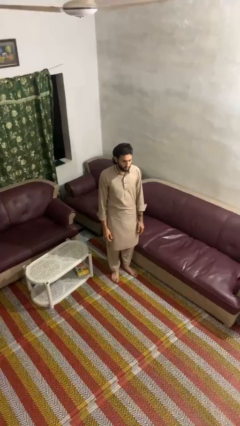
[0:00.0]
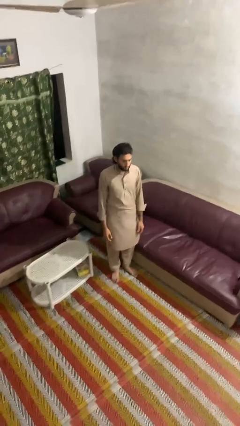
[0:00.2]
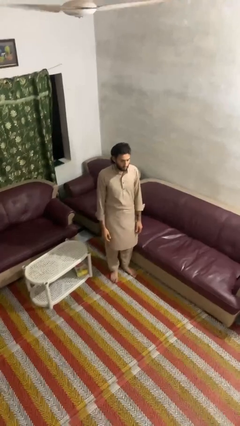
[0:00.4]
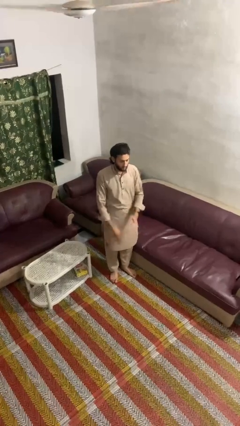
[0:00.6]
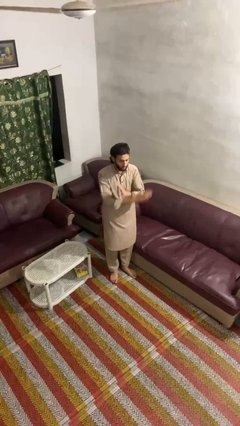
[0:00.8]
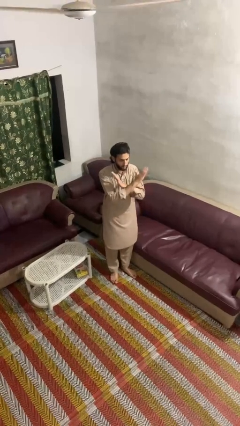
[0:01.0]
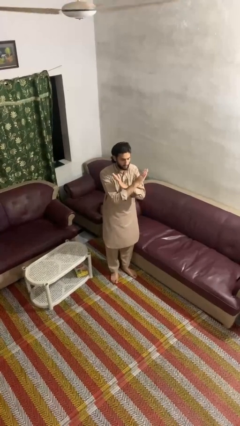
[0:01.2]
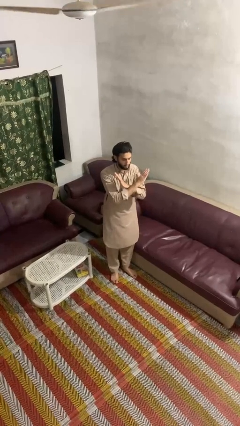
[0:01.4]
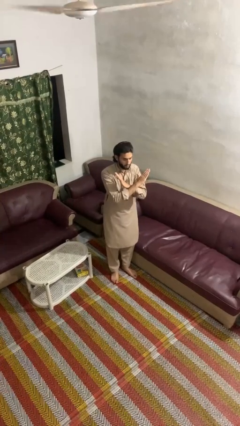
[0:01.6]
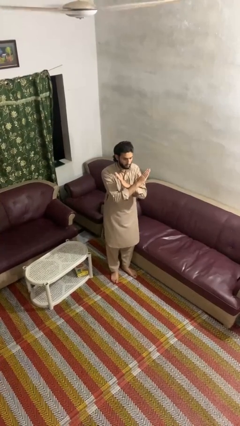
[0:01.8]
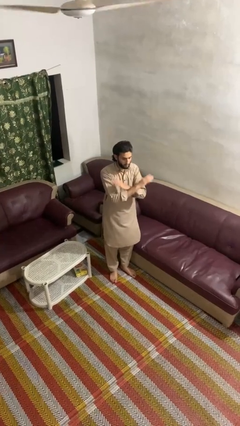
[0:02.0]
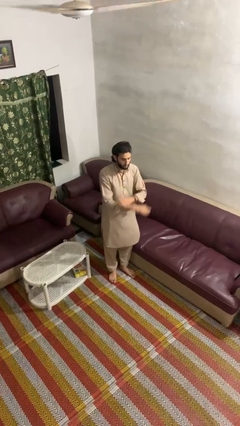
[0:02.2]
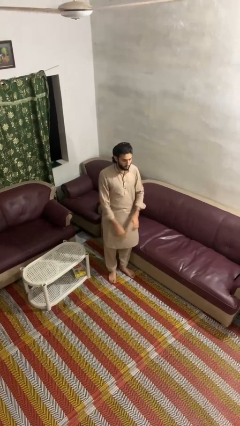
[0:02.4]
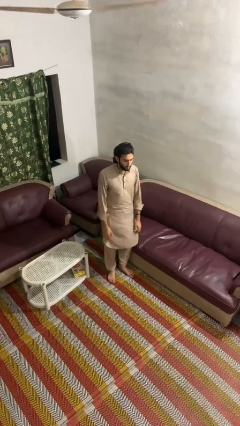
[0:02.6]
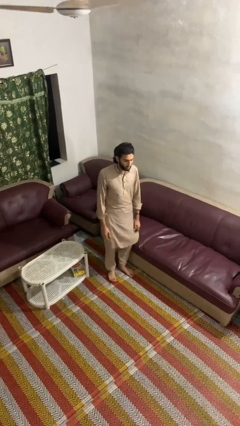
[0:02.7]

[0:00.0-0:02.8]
person gestures arms x

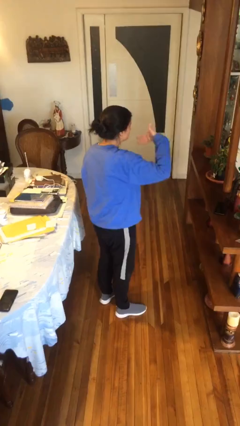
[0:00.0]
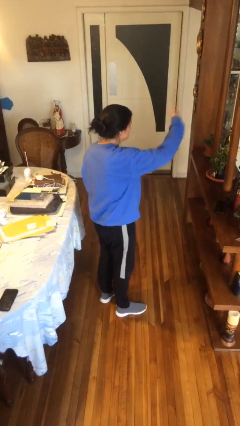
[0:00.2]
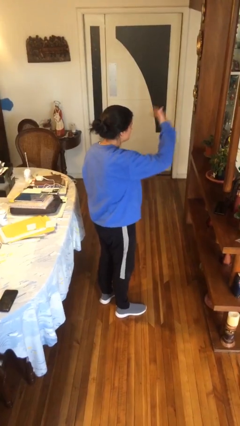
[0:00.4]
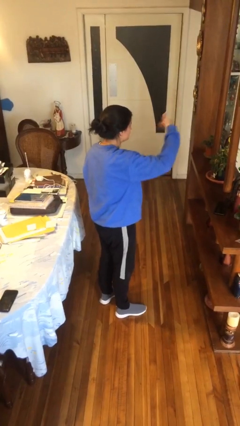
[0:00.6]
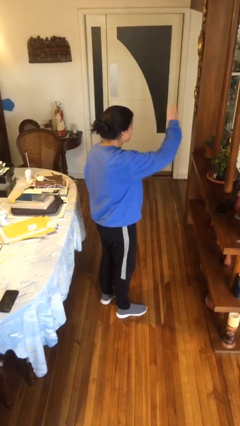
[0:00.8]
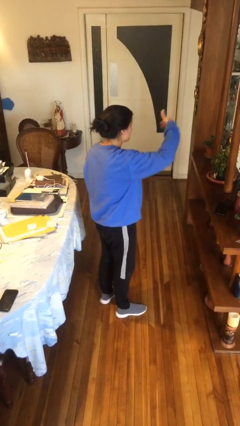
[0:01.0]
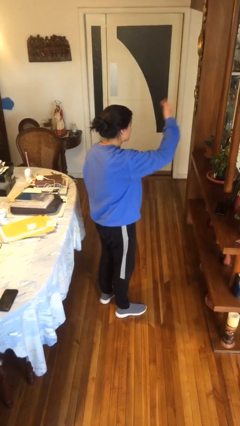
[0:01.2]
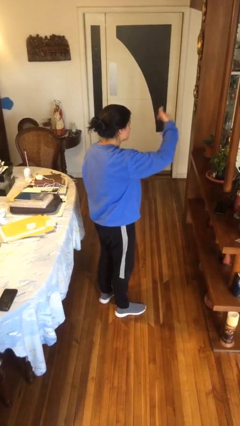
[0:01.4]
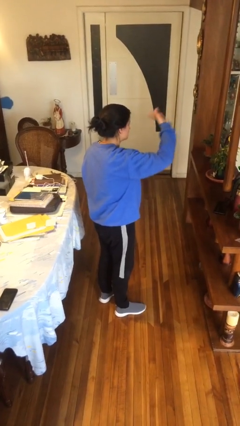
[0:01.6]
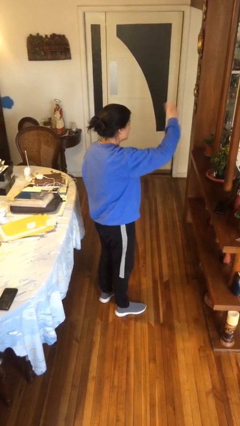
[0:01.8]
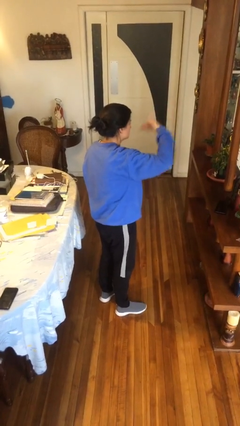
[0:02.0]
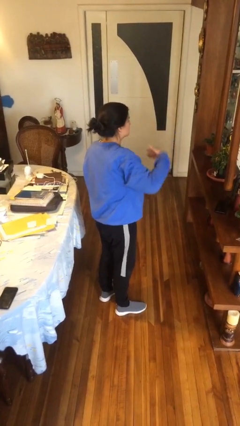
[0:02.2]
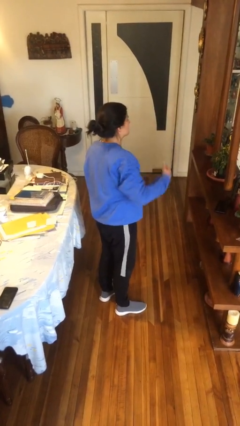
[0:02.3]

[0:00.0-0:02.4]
person gestures come here

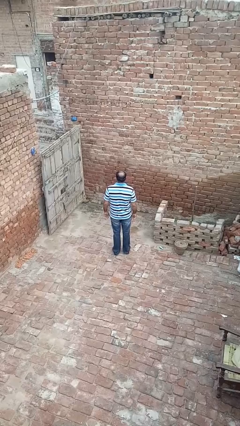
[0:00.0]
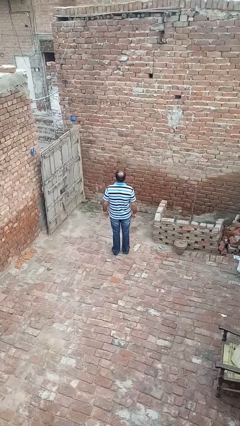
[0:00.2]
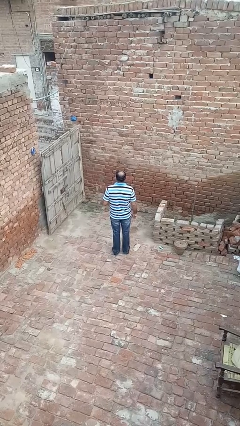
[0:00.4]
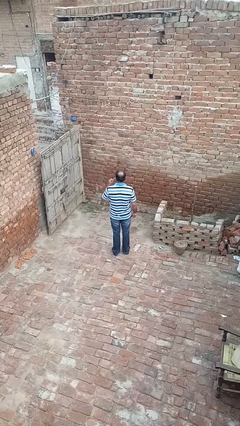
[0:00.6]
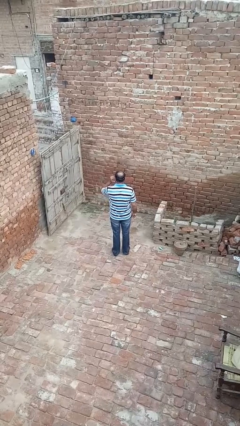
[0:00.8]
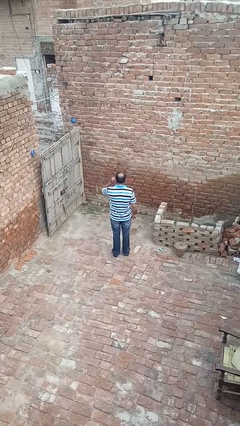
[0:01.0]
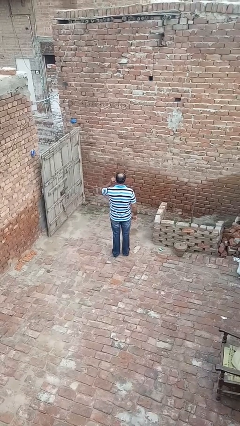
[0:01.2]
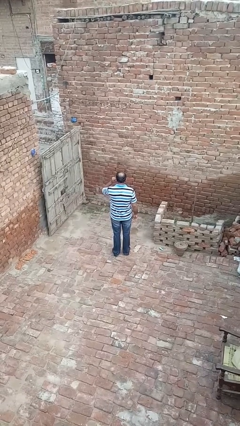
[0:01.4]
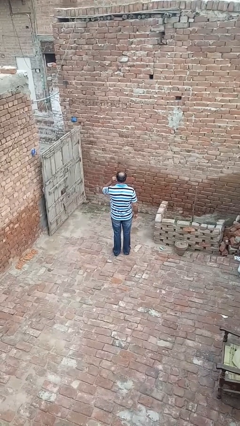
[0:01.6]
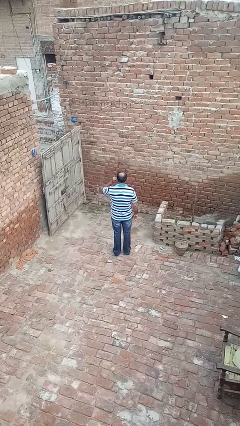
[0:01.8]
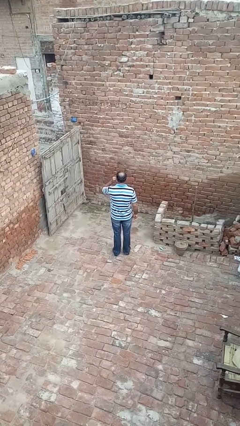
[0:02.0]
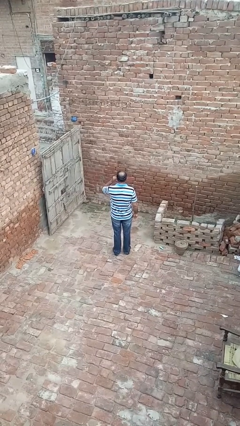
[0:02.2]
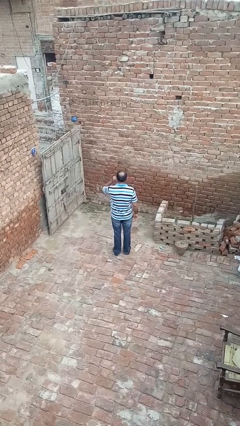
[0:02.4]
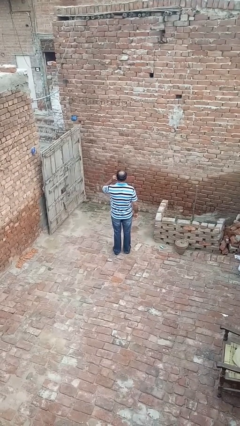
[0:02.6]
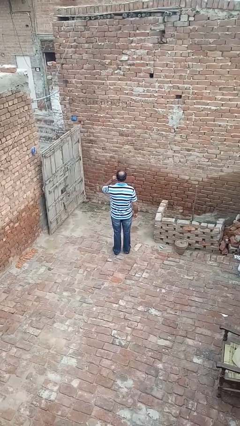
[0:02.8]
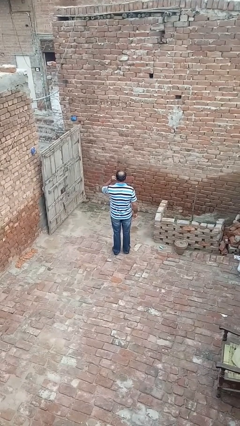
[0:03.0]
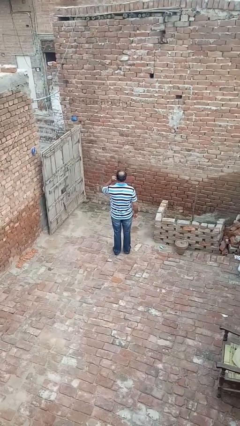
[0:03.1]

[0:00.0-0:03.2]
person touches earlobe

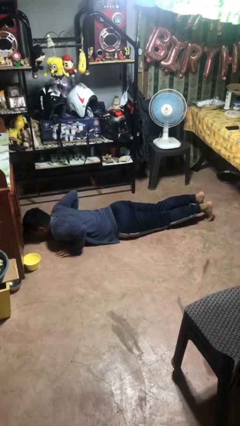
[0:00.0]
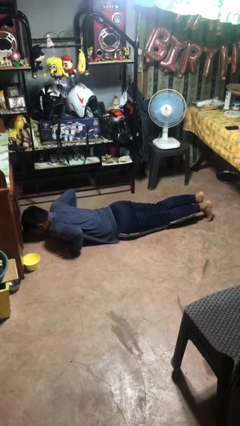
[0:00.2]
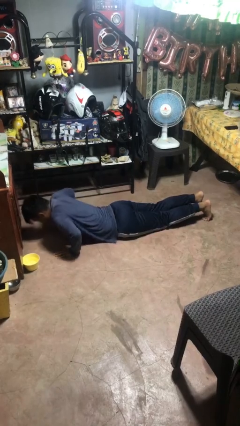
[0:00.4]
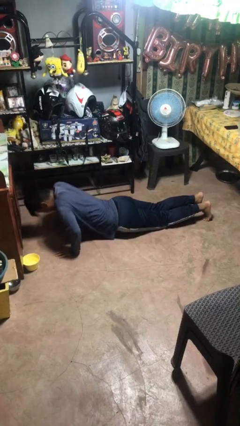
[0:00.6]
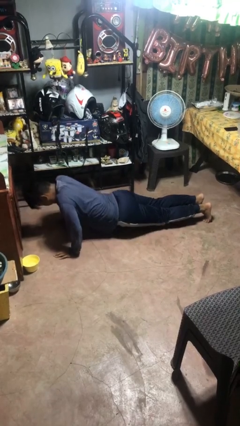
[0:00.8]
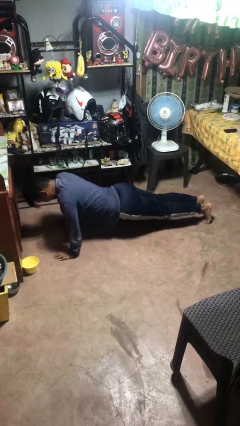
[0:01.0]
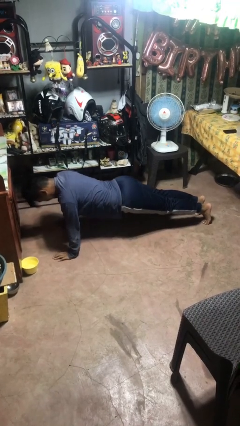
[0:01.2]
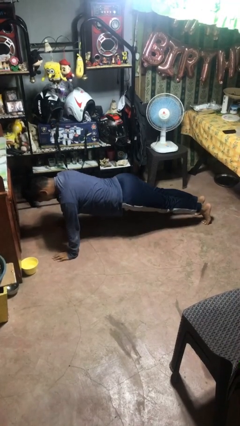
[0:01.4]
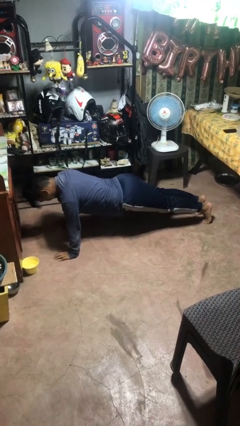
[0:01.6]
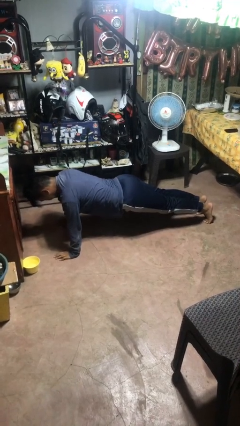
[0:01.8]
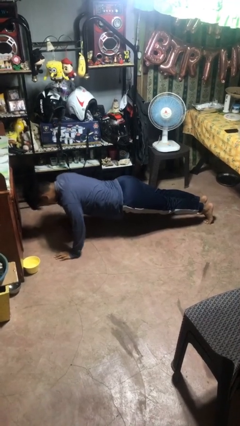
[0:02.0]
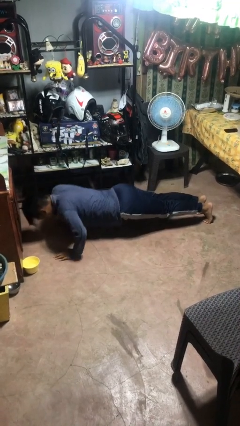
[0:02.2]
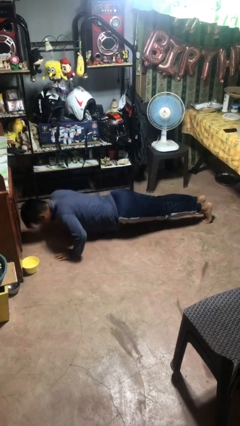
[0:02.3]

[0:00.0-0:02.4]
person exercises with pushup

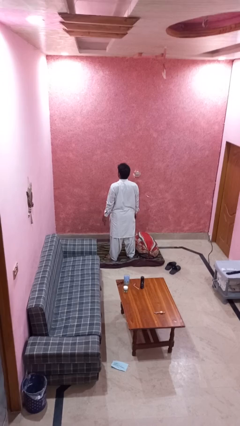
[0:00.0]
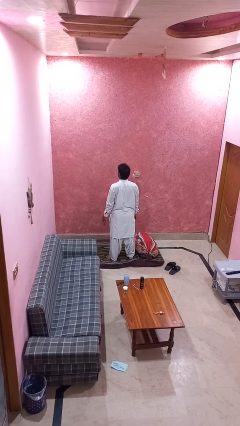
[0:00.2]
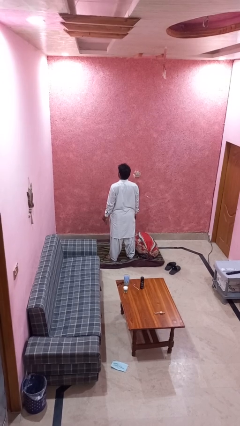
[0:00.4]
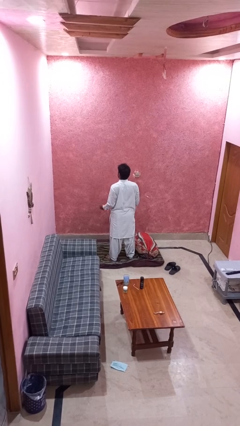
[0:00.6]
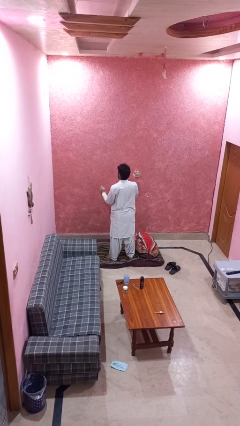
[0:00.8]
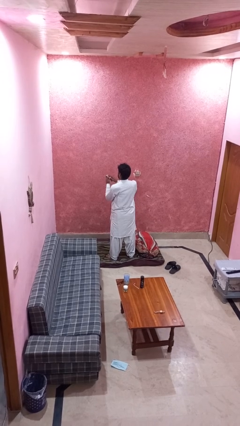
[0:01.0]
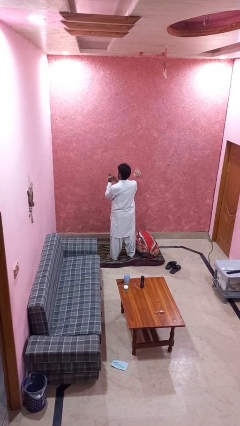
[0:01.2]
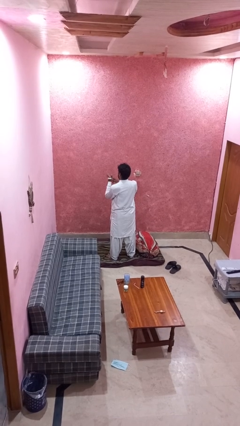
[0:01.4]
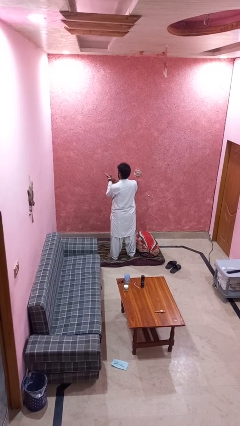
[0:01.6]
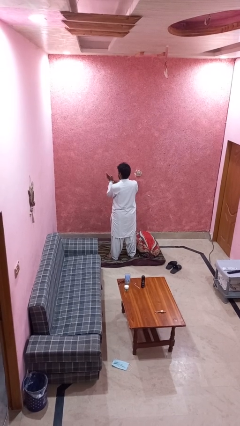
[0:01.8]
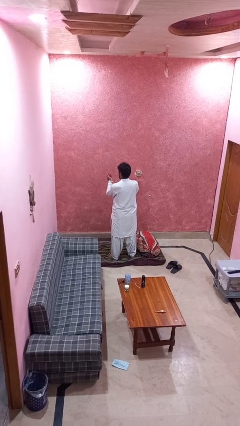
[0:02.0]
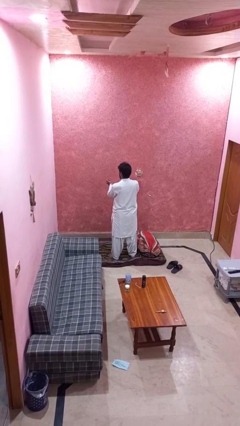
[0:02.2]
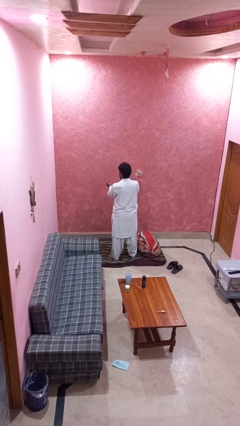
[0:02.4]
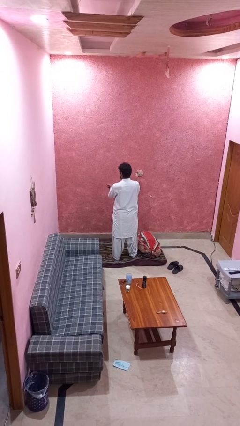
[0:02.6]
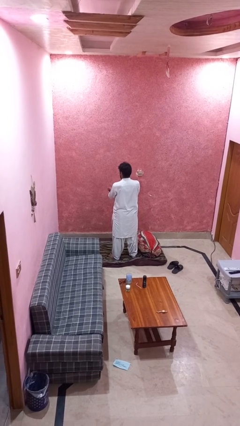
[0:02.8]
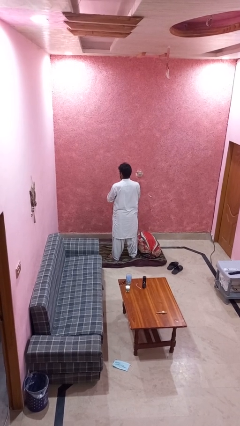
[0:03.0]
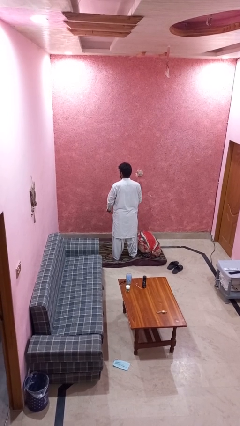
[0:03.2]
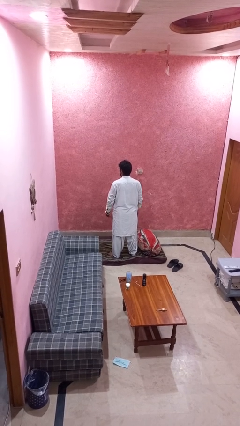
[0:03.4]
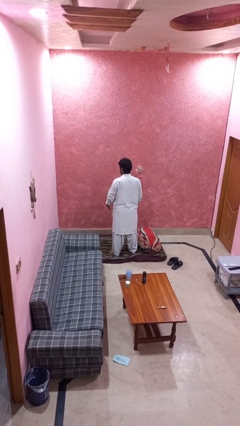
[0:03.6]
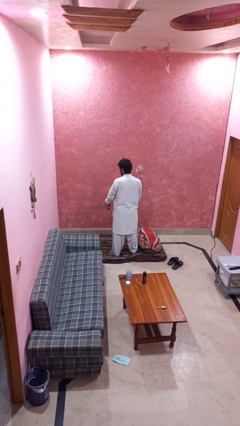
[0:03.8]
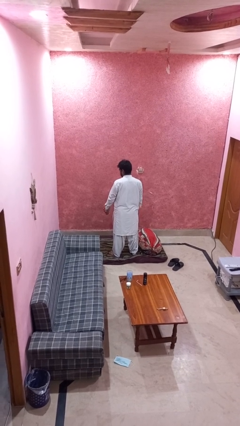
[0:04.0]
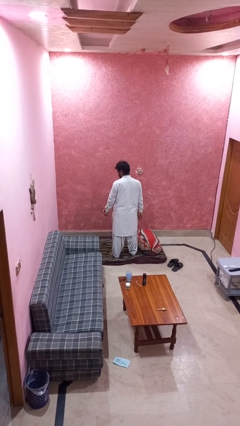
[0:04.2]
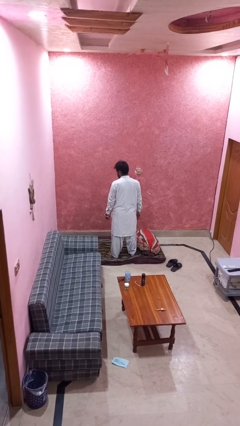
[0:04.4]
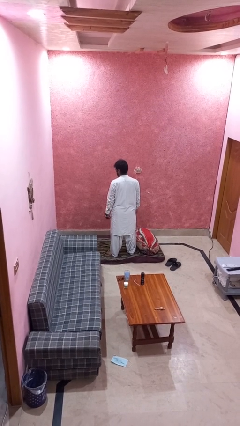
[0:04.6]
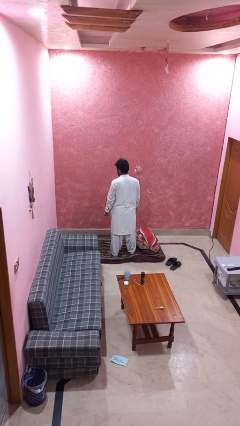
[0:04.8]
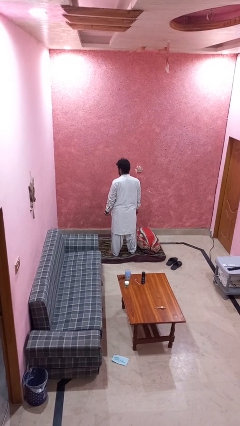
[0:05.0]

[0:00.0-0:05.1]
person puts on wristwatch

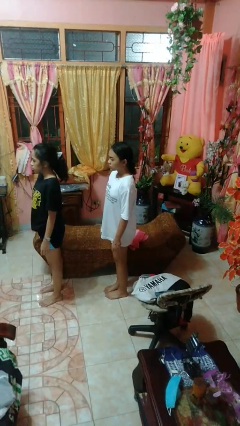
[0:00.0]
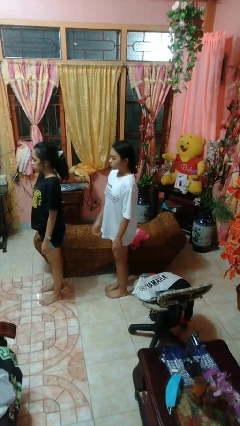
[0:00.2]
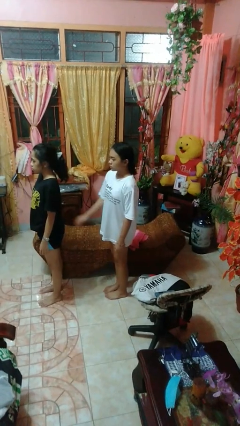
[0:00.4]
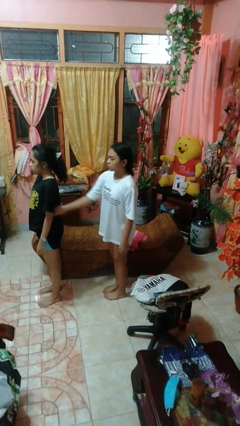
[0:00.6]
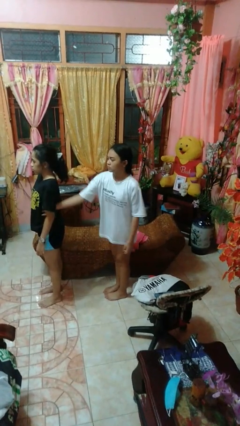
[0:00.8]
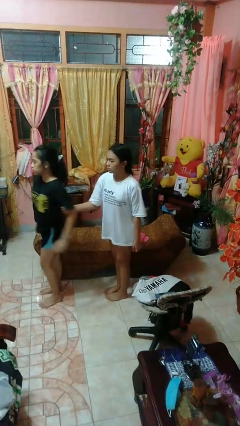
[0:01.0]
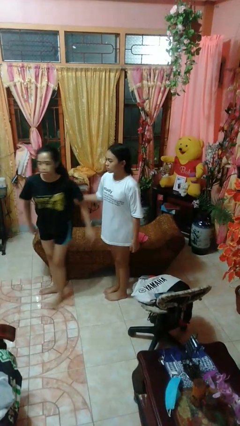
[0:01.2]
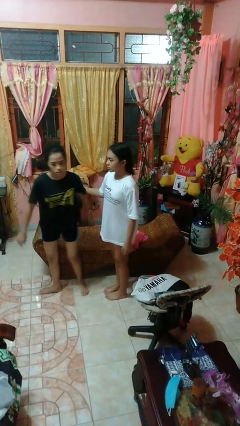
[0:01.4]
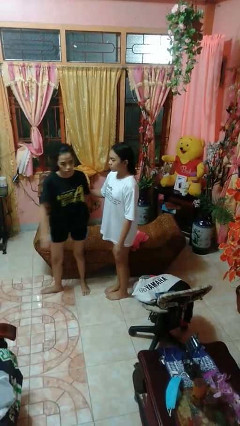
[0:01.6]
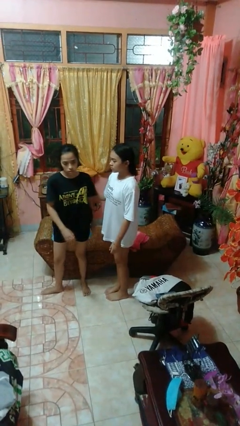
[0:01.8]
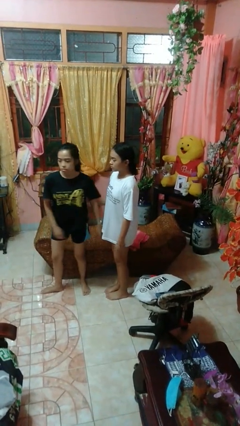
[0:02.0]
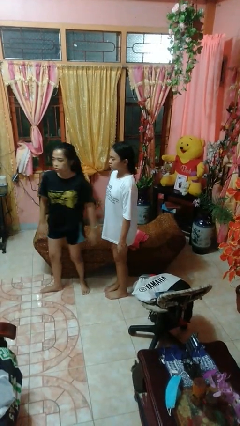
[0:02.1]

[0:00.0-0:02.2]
person grabs person by bicep
